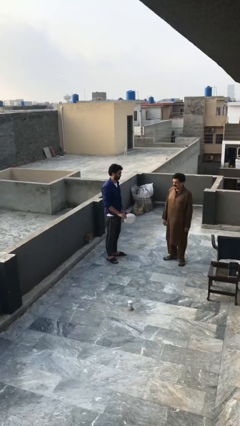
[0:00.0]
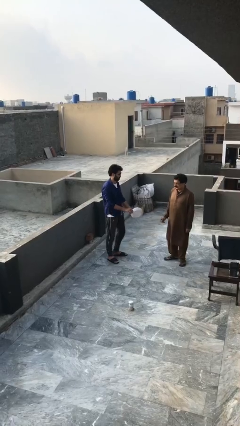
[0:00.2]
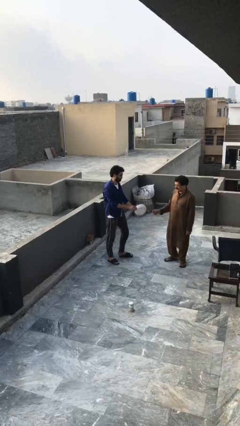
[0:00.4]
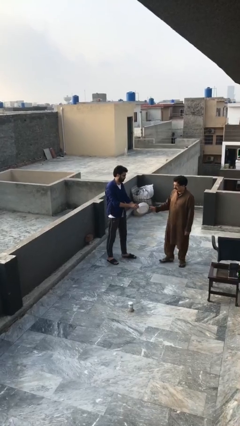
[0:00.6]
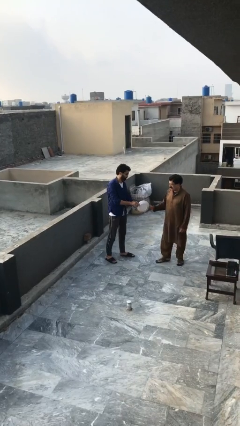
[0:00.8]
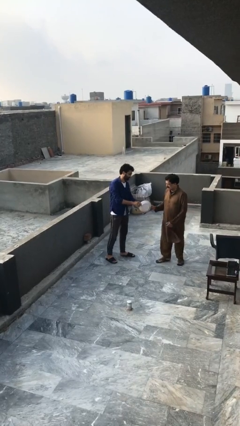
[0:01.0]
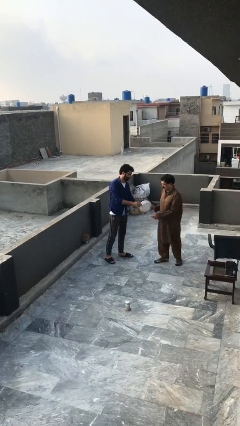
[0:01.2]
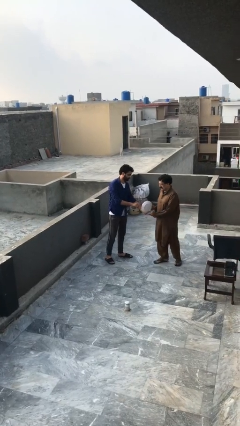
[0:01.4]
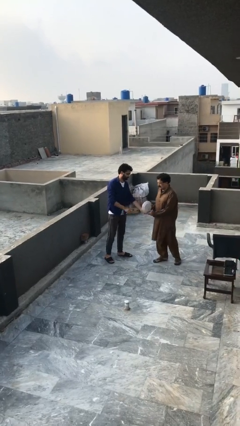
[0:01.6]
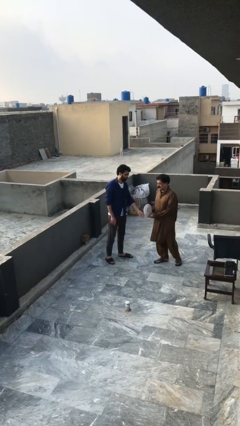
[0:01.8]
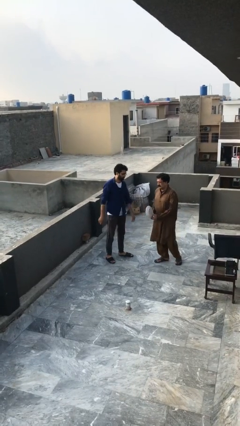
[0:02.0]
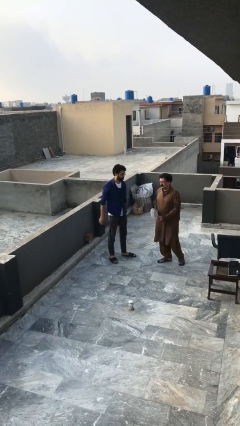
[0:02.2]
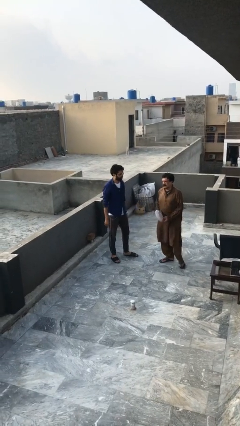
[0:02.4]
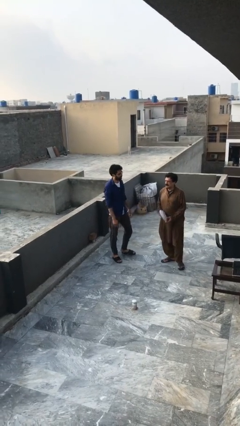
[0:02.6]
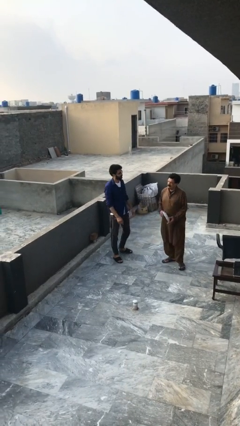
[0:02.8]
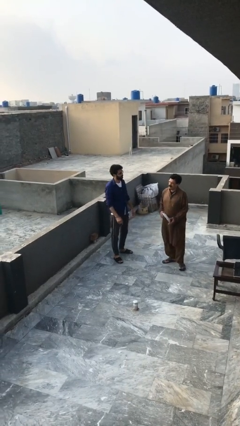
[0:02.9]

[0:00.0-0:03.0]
person transfers object to person

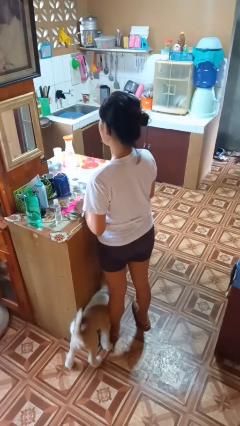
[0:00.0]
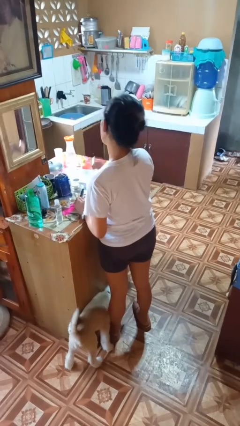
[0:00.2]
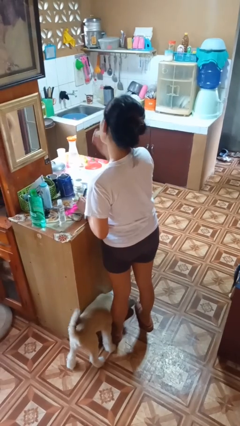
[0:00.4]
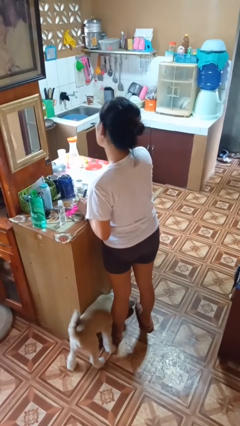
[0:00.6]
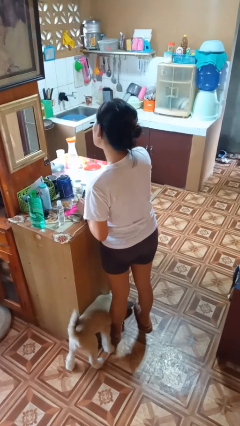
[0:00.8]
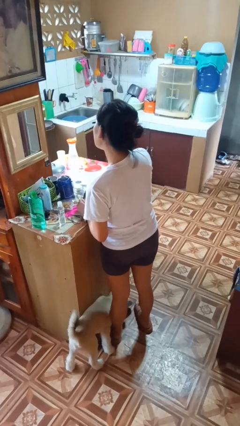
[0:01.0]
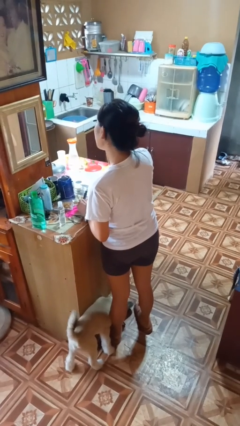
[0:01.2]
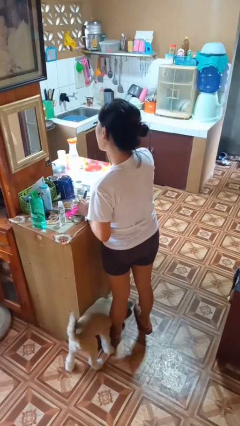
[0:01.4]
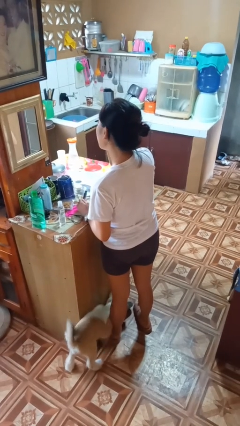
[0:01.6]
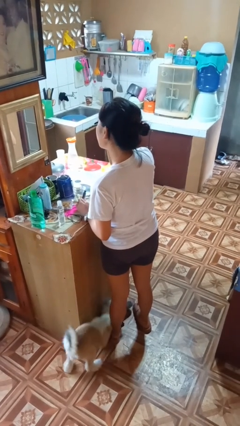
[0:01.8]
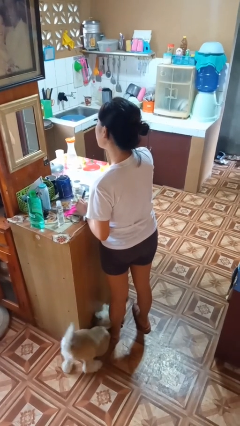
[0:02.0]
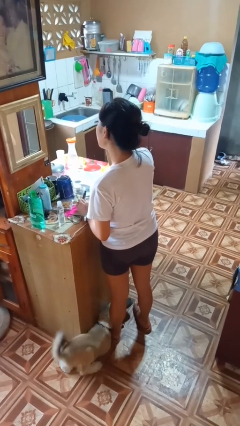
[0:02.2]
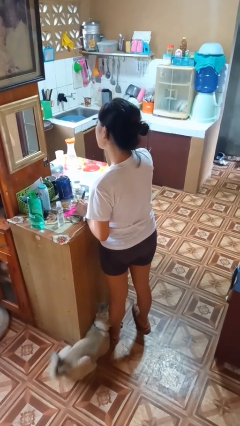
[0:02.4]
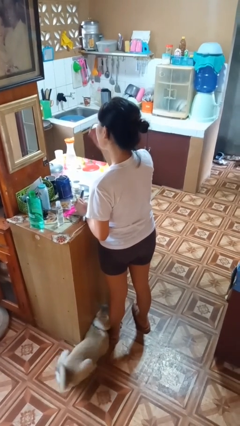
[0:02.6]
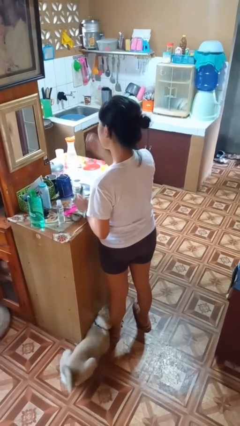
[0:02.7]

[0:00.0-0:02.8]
person applies eye makeup

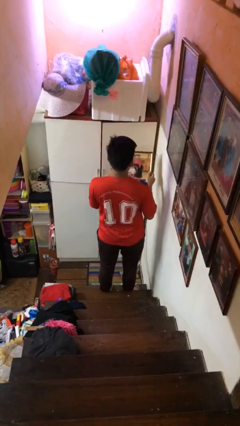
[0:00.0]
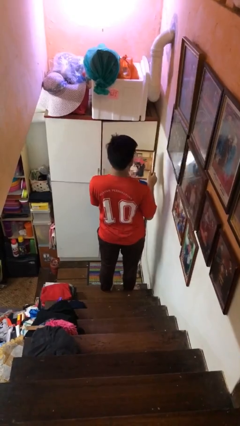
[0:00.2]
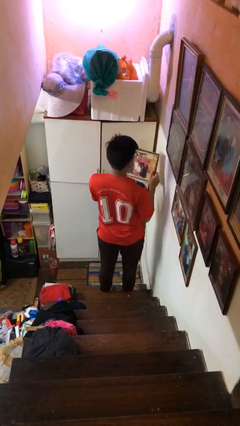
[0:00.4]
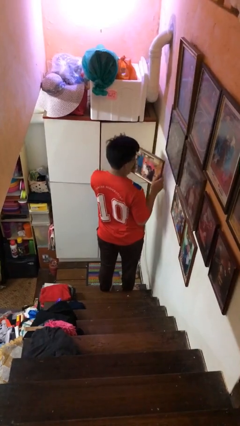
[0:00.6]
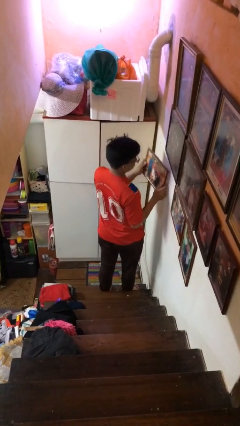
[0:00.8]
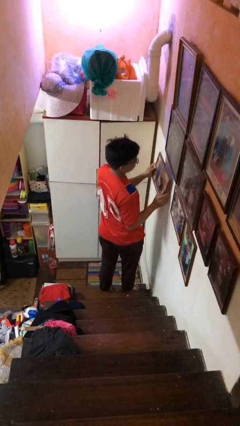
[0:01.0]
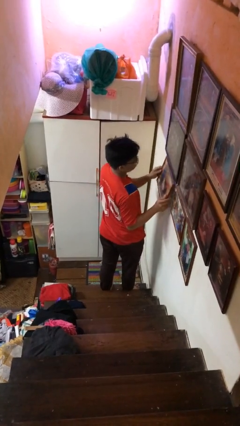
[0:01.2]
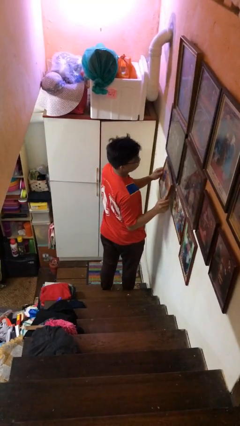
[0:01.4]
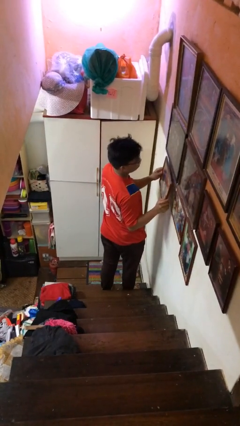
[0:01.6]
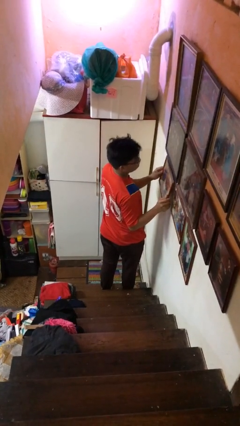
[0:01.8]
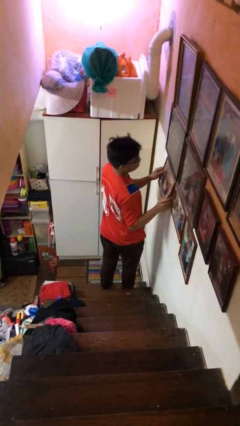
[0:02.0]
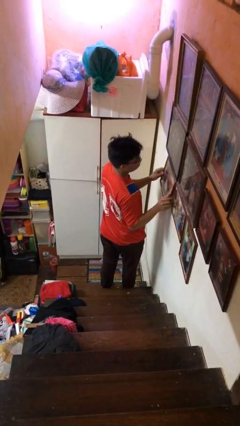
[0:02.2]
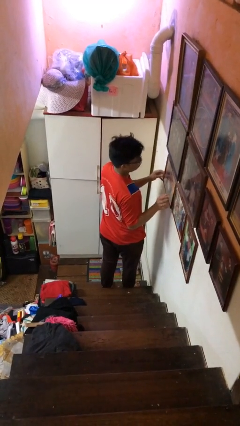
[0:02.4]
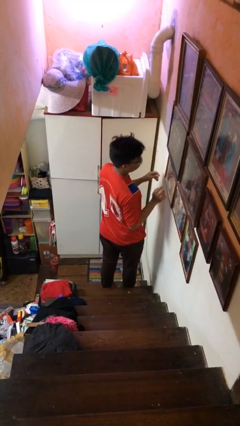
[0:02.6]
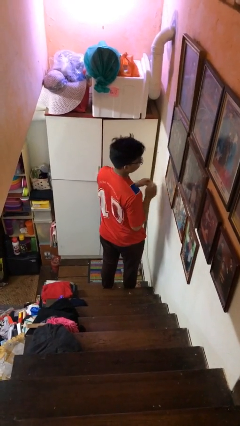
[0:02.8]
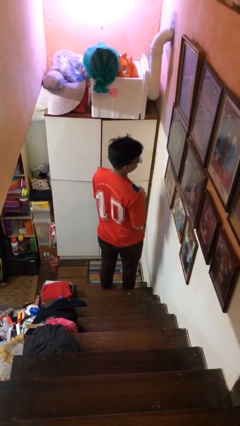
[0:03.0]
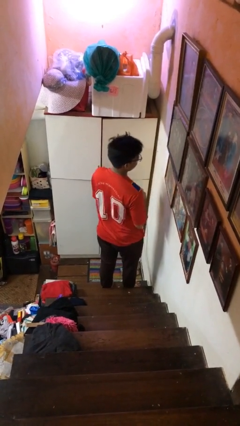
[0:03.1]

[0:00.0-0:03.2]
person puts up picture frame

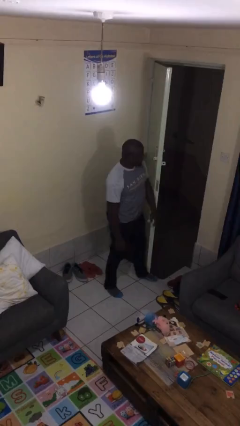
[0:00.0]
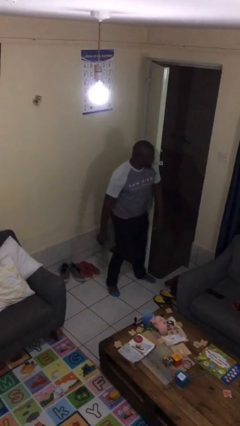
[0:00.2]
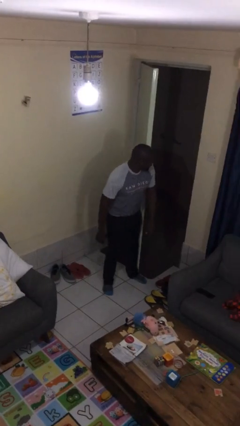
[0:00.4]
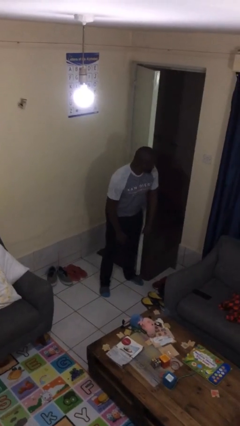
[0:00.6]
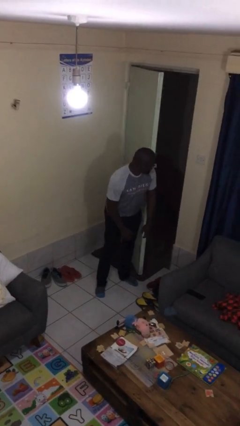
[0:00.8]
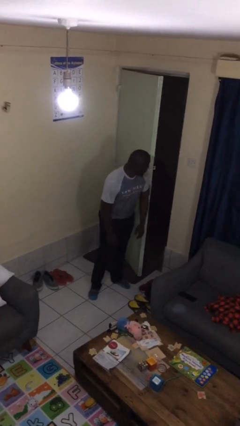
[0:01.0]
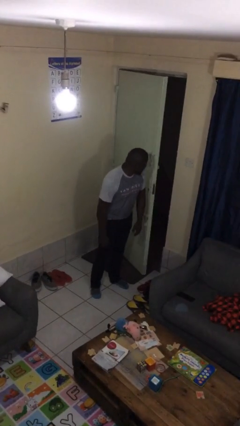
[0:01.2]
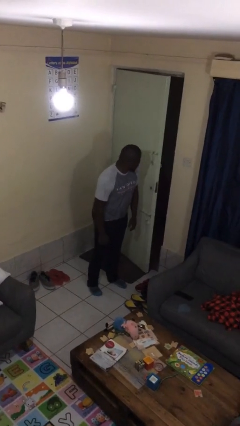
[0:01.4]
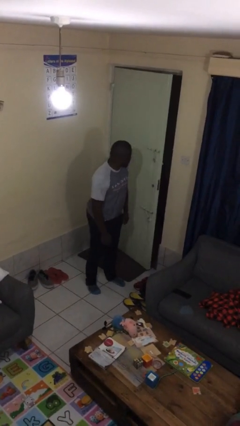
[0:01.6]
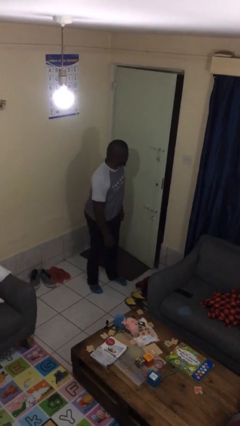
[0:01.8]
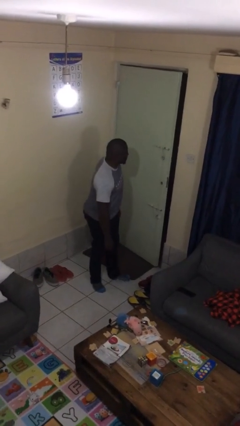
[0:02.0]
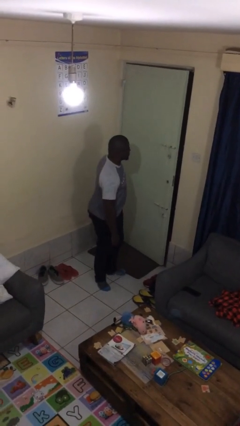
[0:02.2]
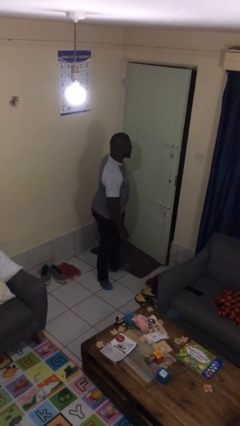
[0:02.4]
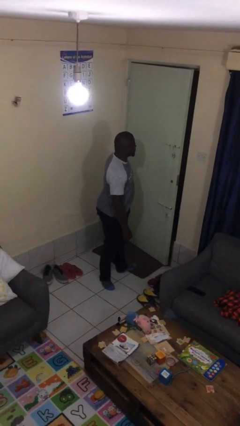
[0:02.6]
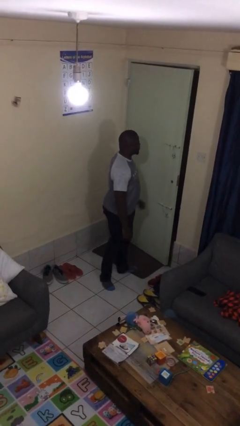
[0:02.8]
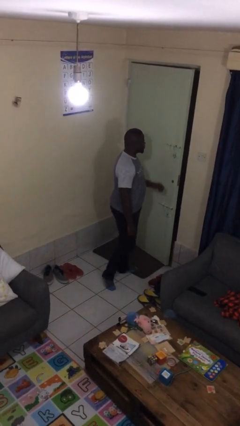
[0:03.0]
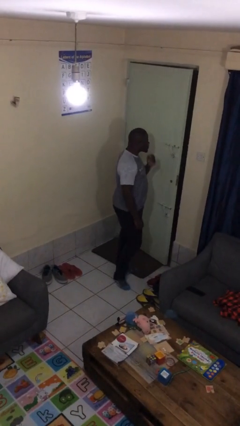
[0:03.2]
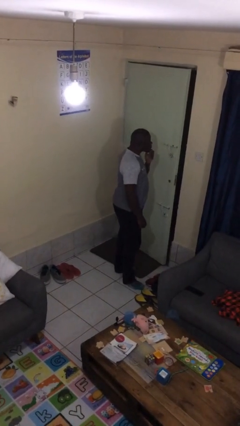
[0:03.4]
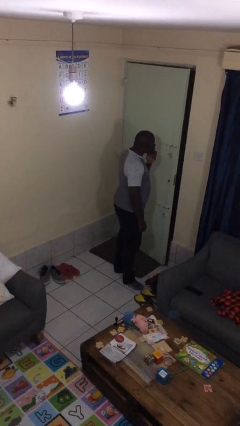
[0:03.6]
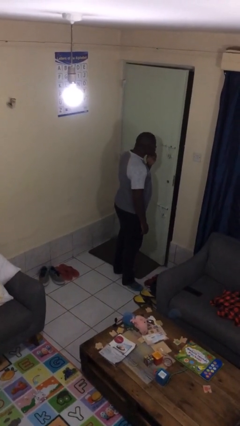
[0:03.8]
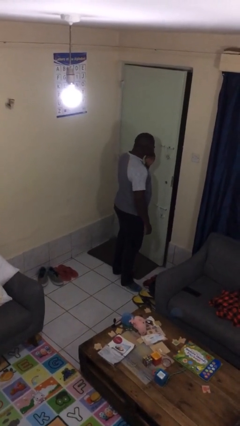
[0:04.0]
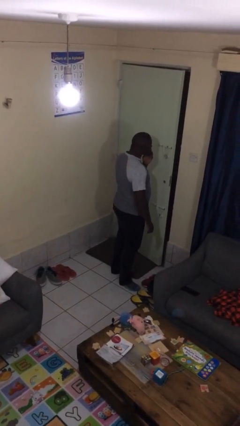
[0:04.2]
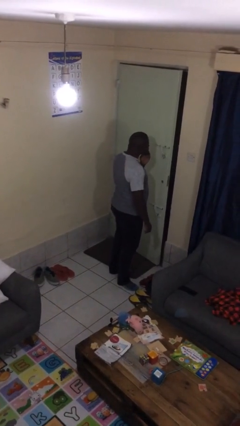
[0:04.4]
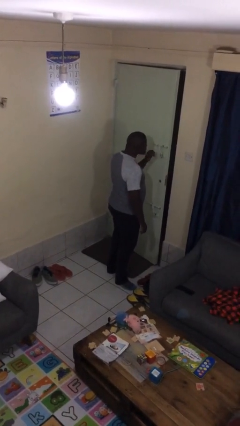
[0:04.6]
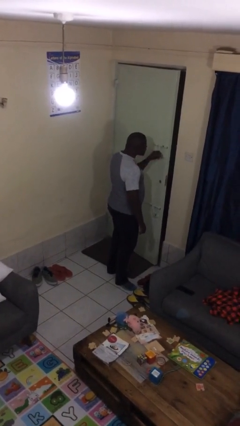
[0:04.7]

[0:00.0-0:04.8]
person closes door with hip

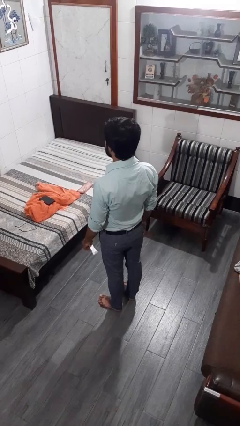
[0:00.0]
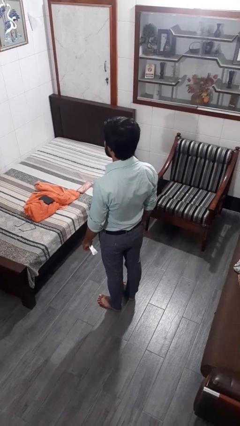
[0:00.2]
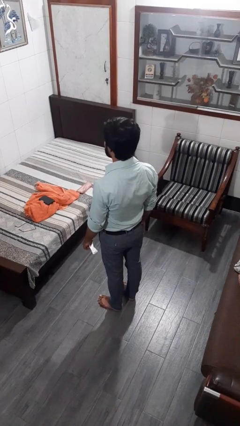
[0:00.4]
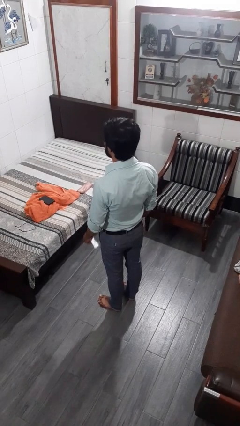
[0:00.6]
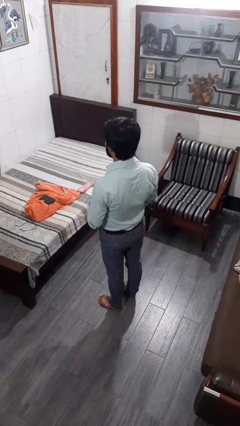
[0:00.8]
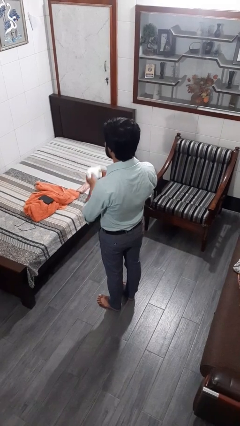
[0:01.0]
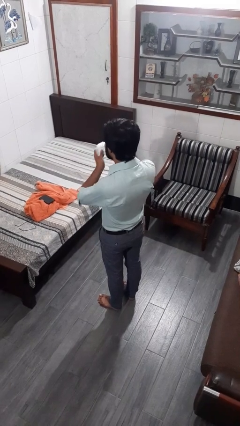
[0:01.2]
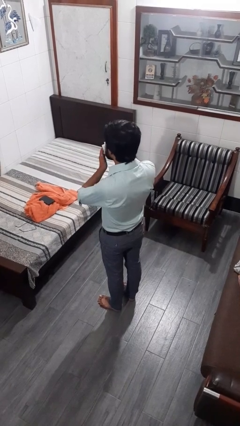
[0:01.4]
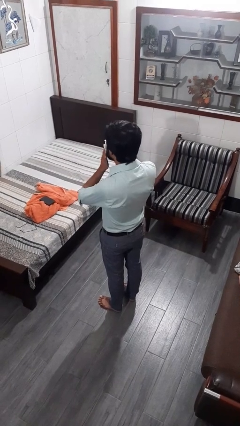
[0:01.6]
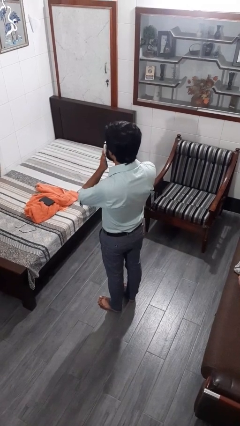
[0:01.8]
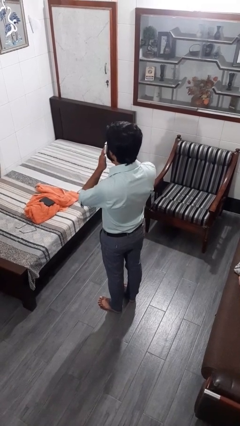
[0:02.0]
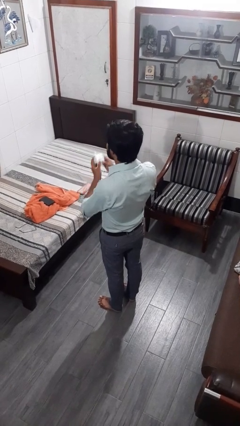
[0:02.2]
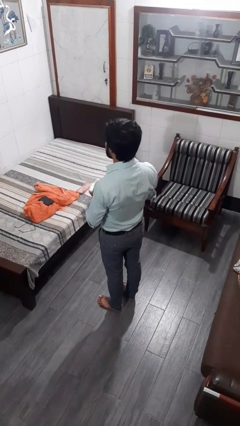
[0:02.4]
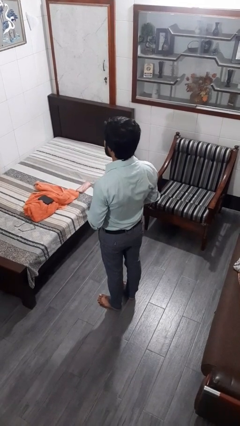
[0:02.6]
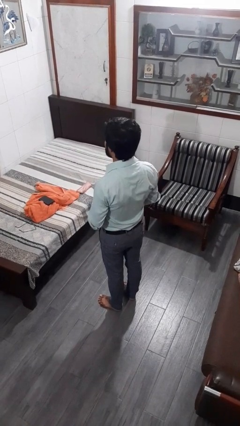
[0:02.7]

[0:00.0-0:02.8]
person blows nose

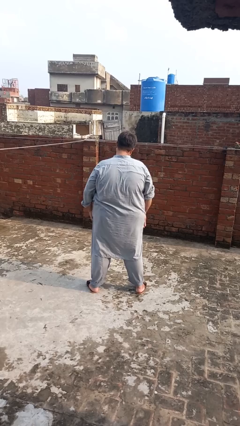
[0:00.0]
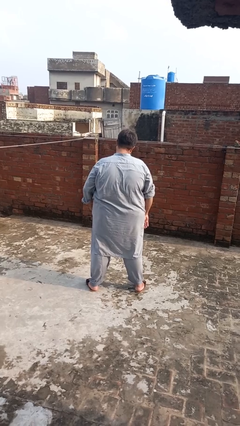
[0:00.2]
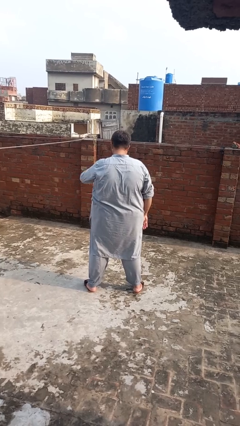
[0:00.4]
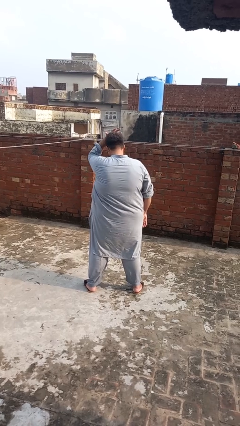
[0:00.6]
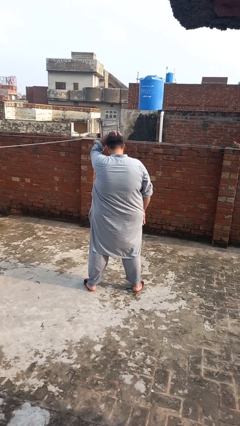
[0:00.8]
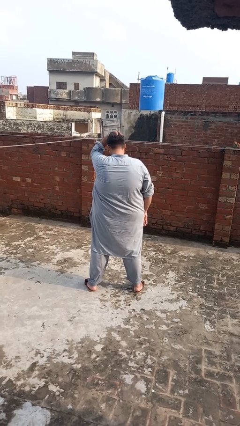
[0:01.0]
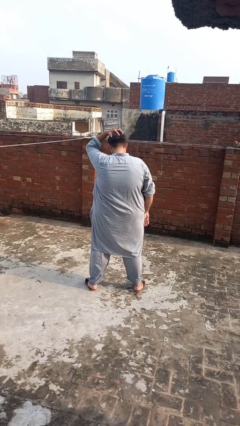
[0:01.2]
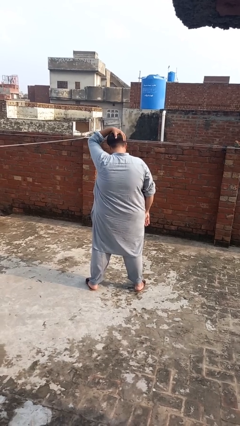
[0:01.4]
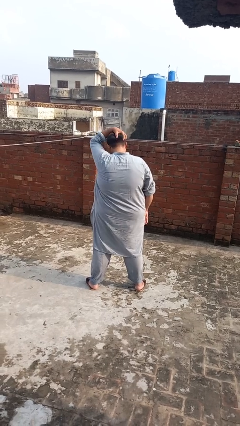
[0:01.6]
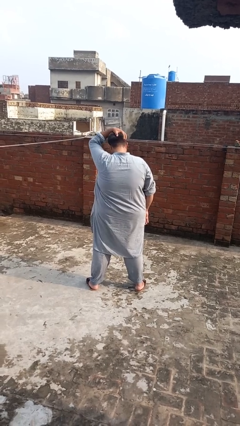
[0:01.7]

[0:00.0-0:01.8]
person pats head
